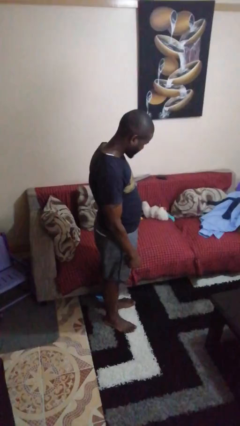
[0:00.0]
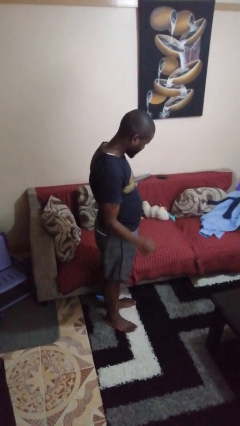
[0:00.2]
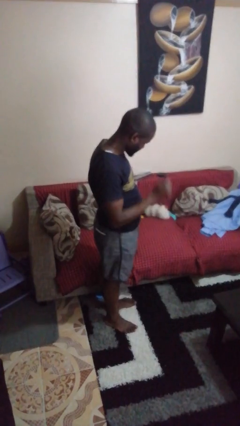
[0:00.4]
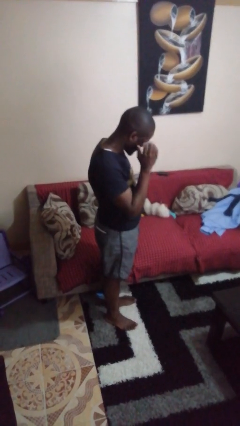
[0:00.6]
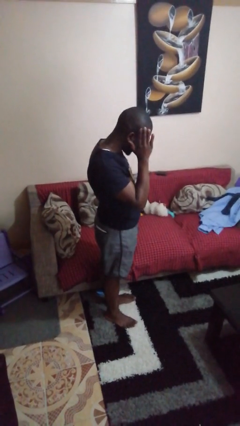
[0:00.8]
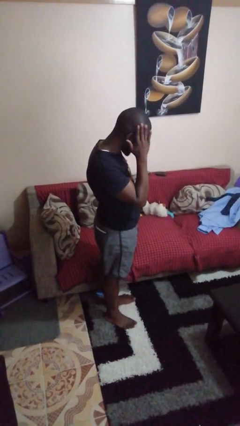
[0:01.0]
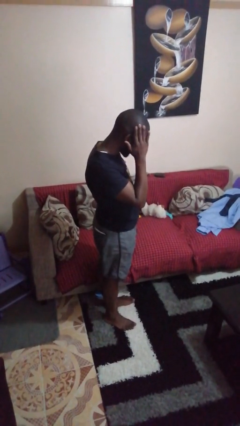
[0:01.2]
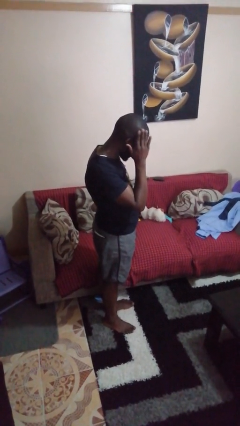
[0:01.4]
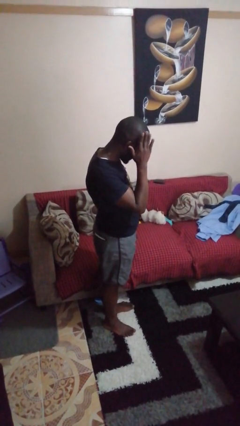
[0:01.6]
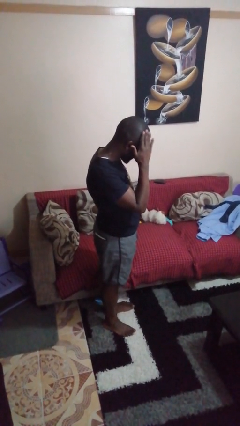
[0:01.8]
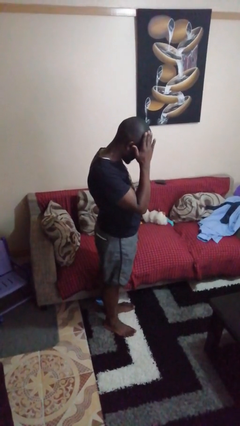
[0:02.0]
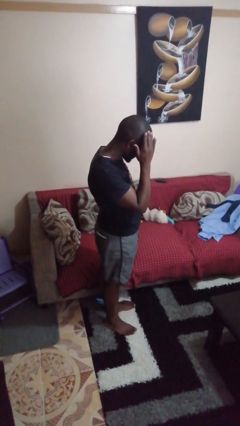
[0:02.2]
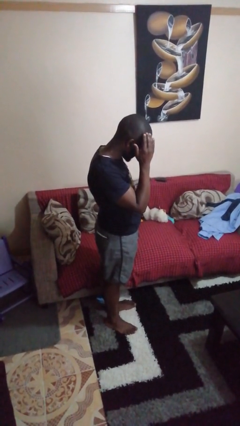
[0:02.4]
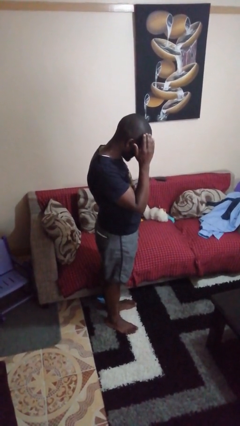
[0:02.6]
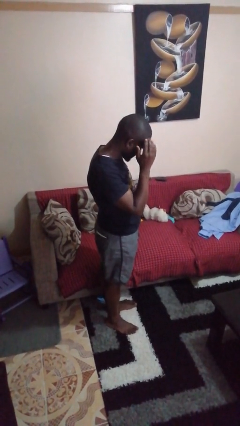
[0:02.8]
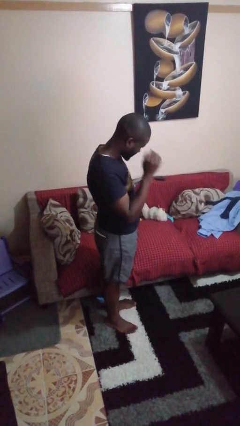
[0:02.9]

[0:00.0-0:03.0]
person pats head

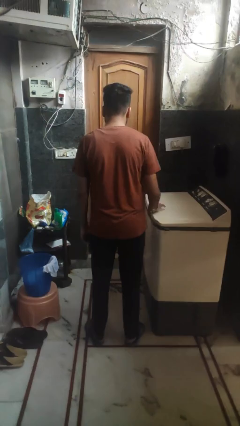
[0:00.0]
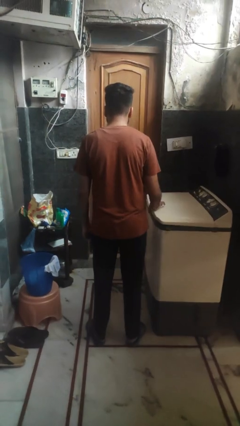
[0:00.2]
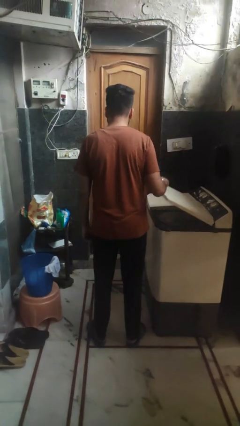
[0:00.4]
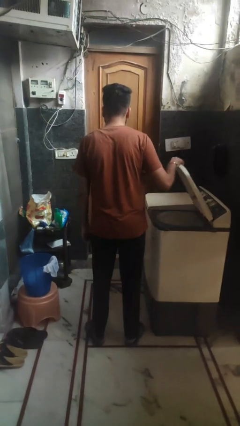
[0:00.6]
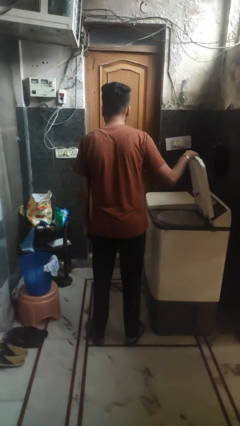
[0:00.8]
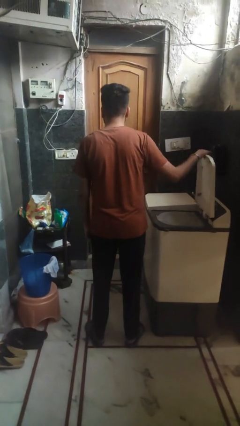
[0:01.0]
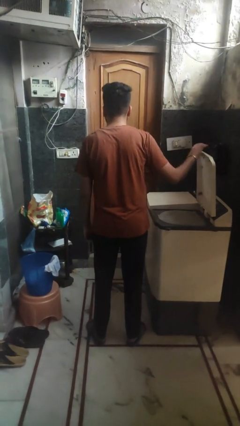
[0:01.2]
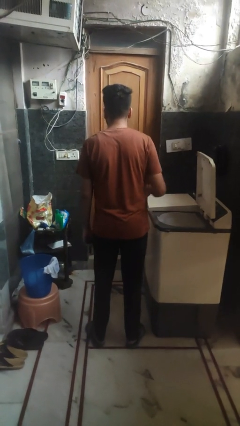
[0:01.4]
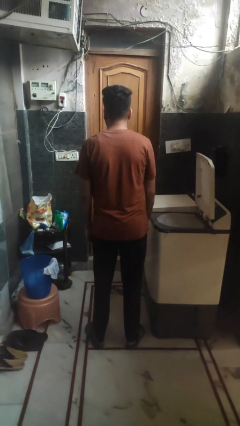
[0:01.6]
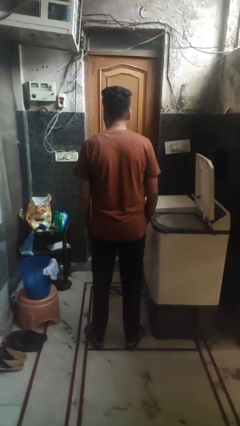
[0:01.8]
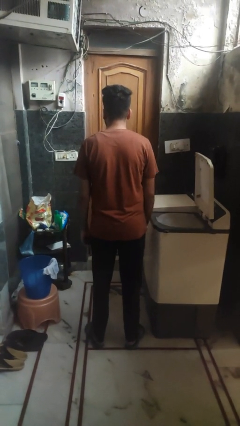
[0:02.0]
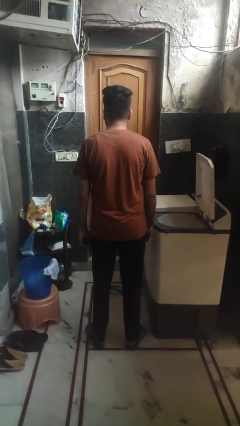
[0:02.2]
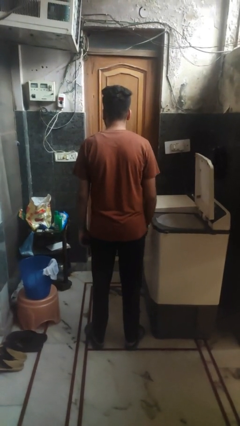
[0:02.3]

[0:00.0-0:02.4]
person opens clothes washer

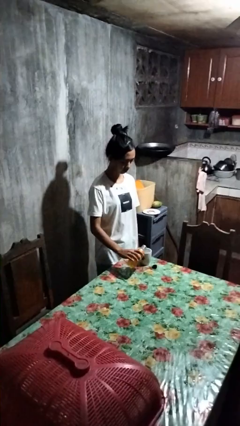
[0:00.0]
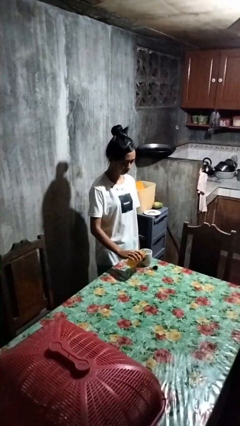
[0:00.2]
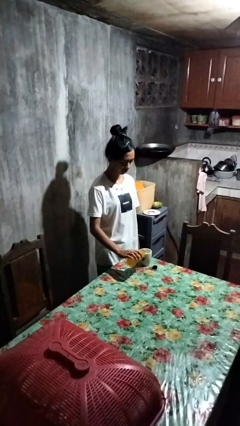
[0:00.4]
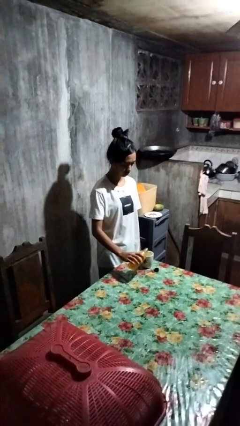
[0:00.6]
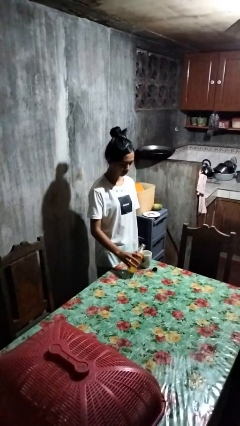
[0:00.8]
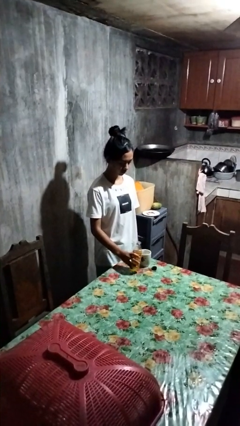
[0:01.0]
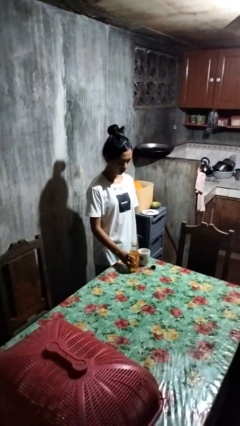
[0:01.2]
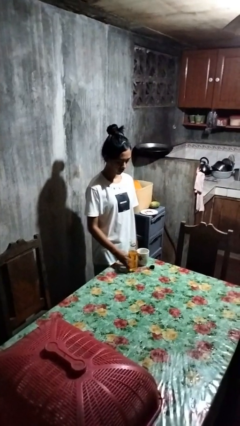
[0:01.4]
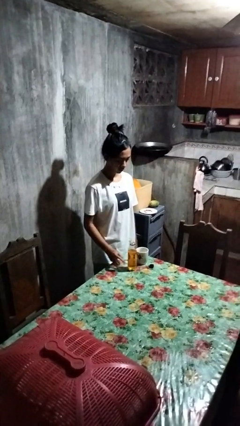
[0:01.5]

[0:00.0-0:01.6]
person pours liquid into cup

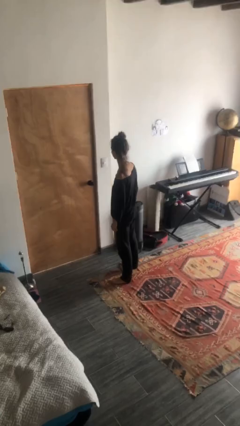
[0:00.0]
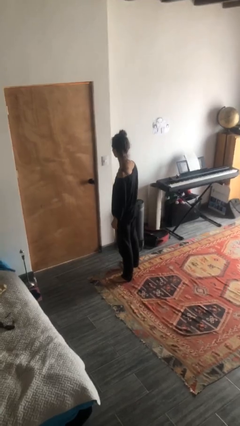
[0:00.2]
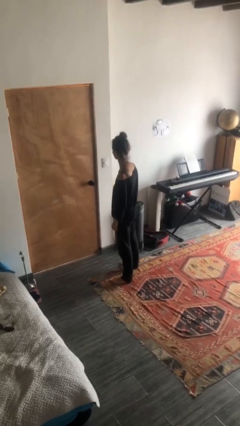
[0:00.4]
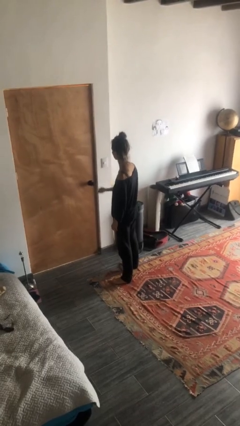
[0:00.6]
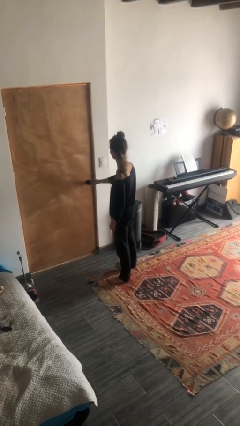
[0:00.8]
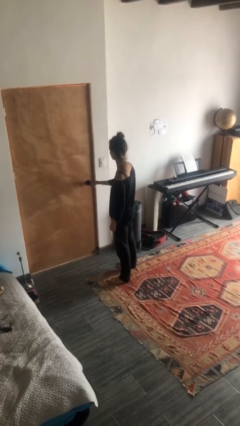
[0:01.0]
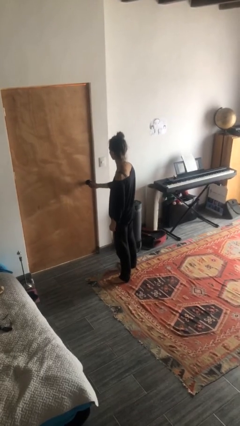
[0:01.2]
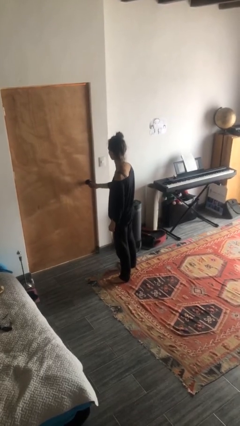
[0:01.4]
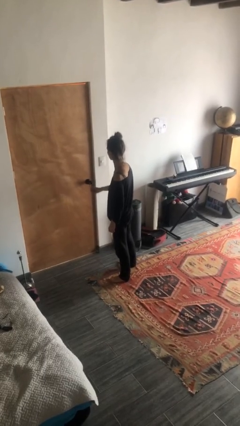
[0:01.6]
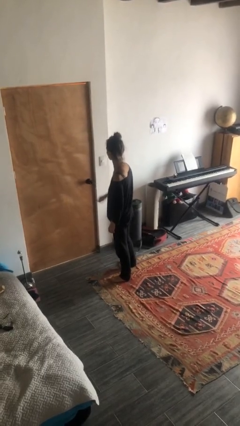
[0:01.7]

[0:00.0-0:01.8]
person locks door with keys

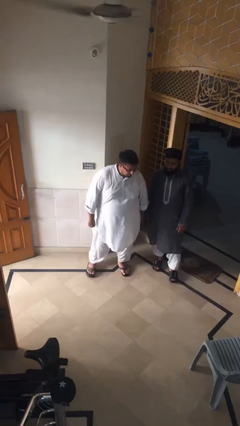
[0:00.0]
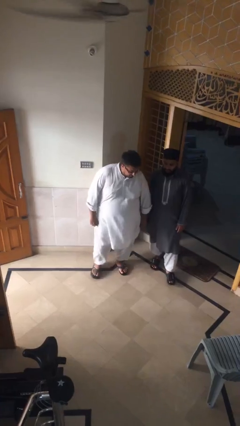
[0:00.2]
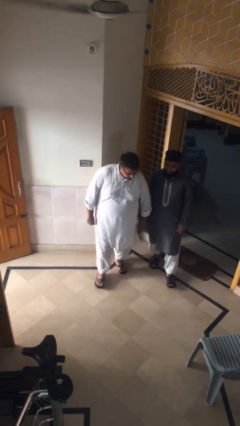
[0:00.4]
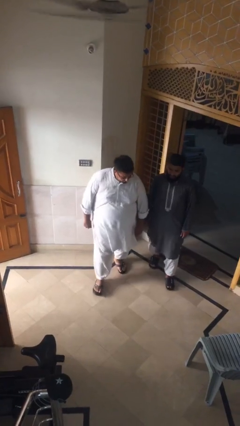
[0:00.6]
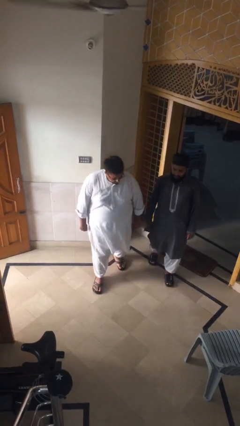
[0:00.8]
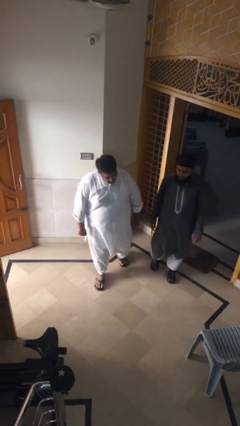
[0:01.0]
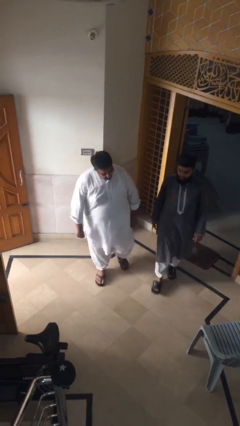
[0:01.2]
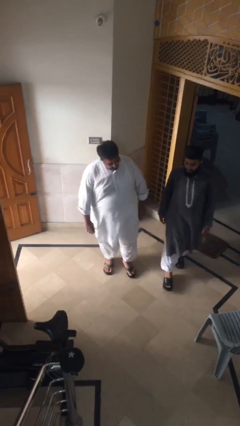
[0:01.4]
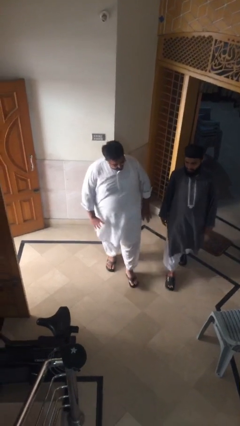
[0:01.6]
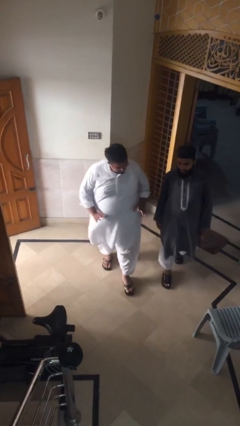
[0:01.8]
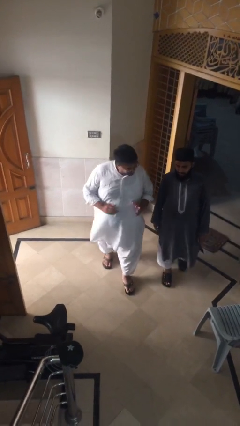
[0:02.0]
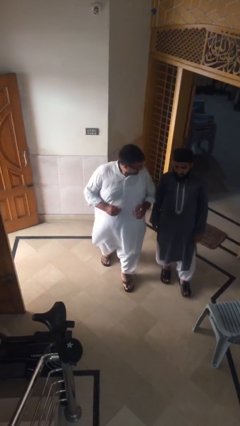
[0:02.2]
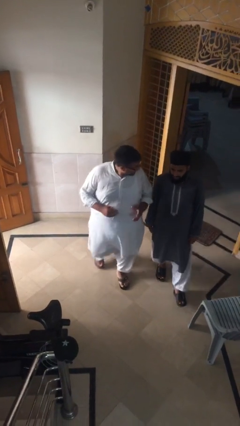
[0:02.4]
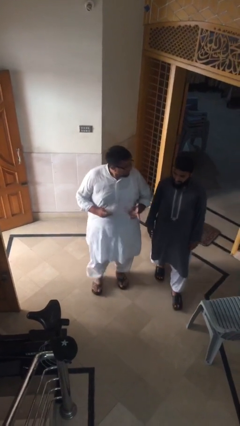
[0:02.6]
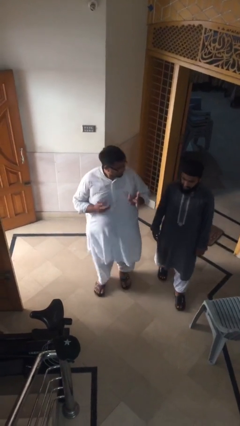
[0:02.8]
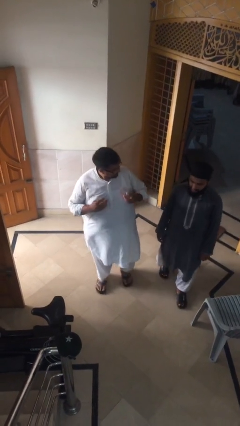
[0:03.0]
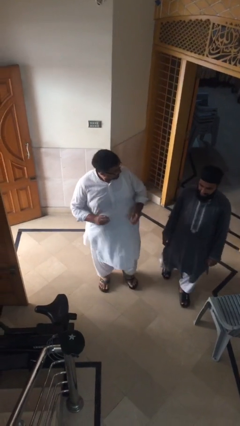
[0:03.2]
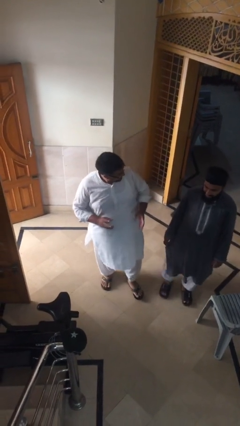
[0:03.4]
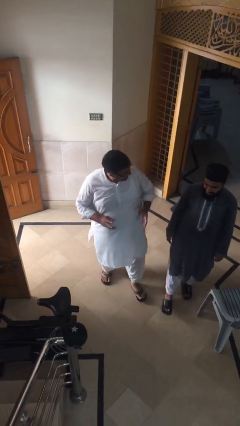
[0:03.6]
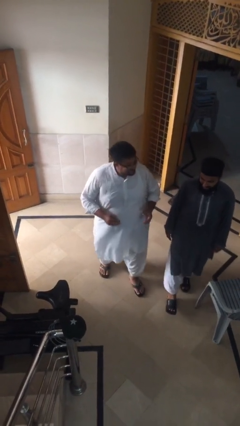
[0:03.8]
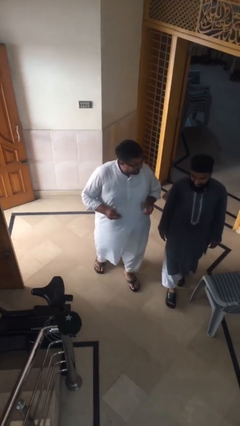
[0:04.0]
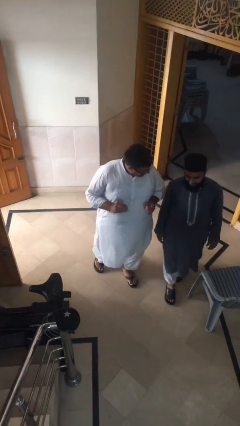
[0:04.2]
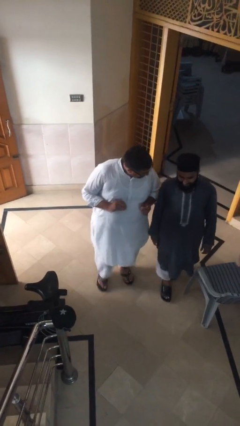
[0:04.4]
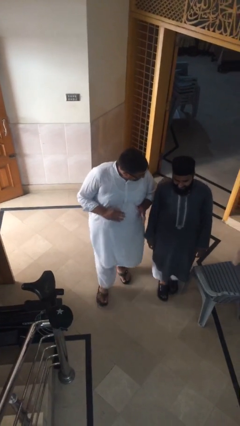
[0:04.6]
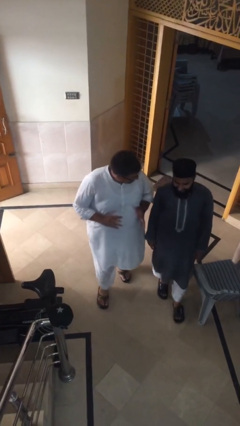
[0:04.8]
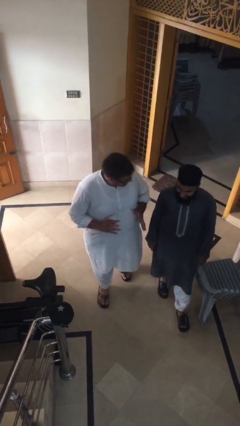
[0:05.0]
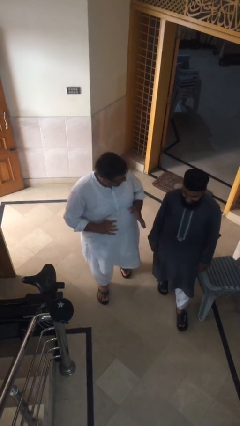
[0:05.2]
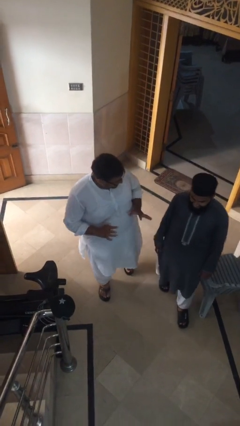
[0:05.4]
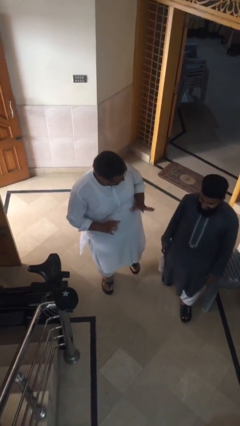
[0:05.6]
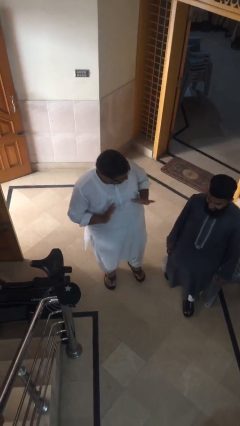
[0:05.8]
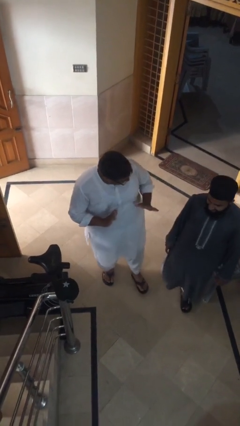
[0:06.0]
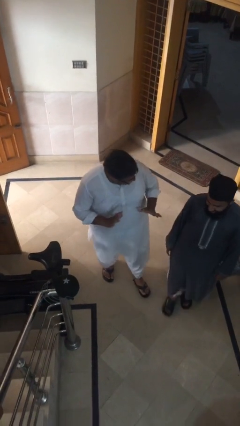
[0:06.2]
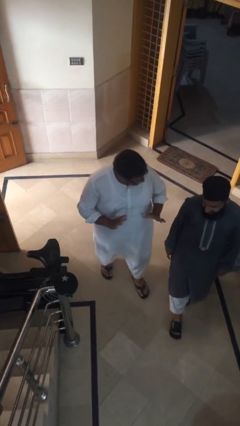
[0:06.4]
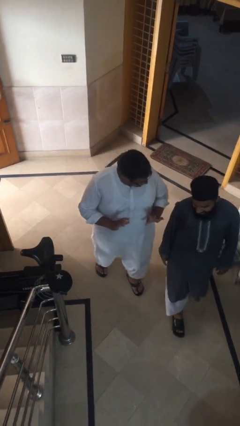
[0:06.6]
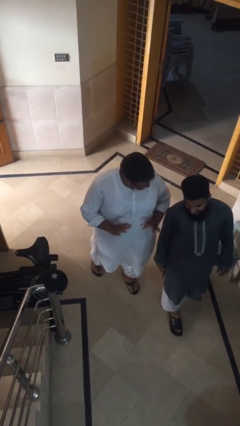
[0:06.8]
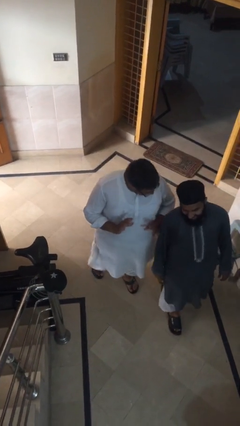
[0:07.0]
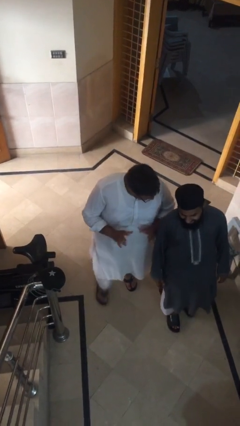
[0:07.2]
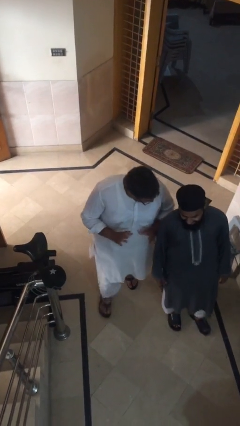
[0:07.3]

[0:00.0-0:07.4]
person talks to person

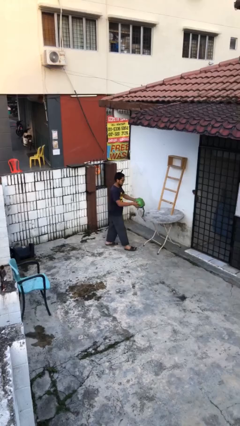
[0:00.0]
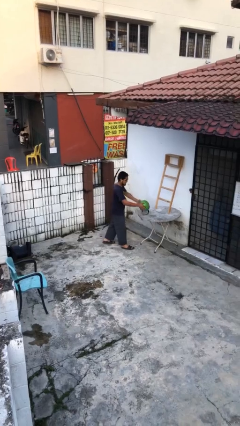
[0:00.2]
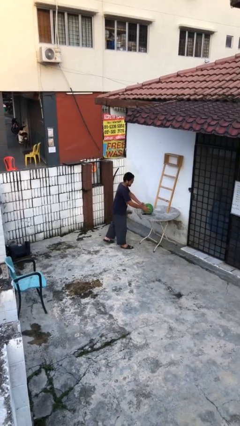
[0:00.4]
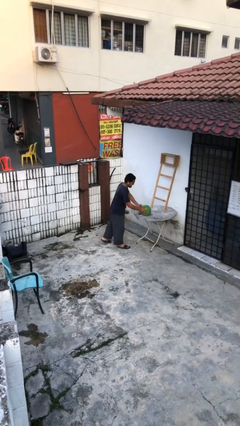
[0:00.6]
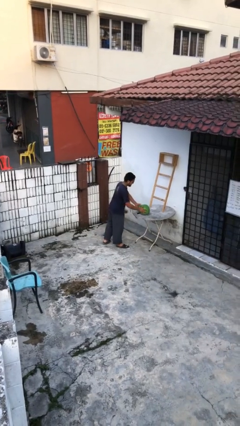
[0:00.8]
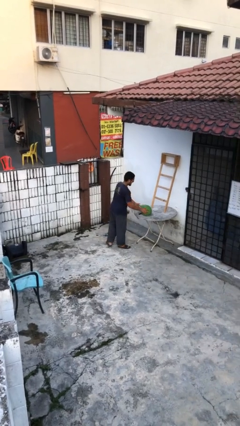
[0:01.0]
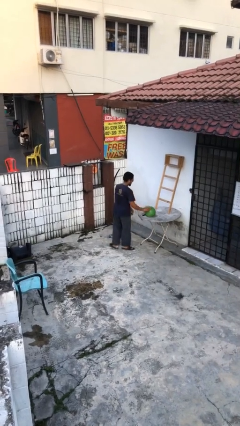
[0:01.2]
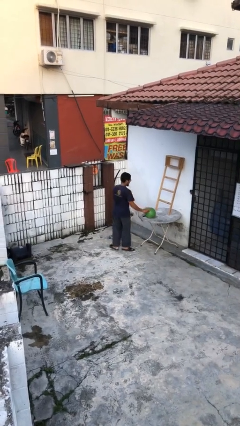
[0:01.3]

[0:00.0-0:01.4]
person puts down object on table
